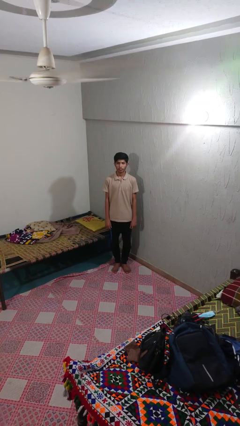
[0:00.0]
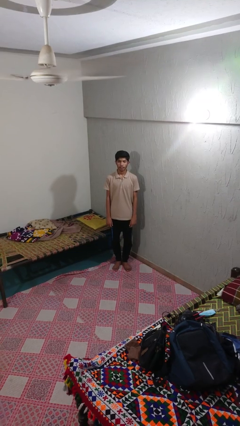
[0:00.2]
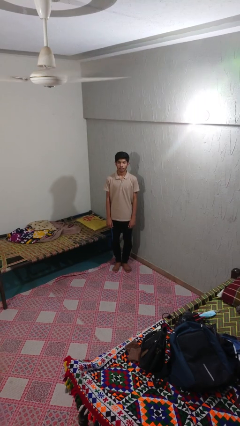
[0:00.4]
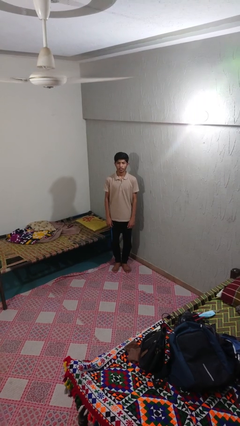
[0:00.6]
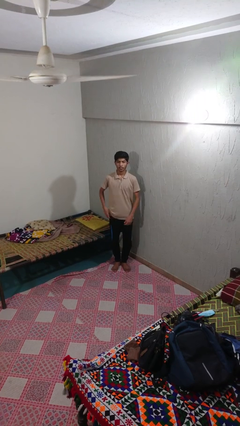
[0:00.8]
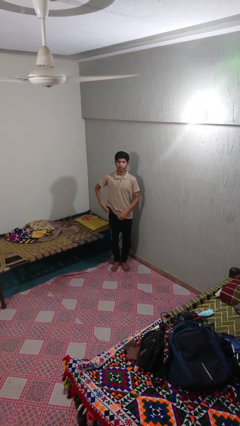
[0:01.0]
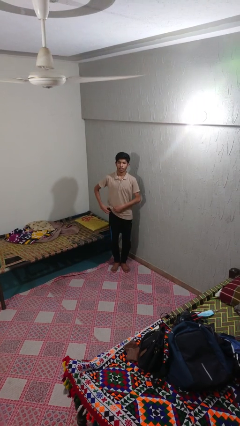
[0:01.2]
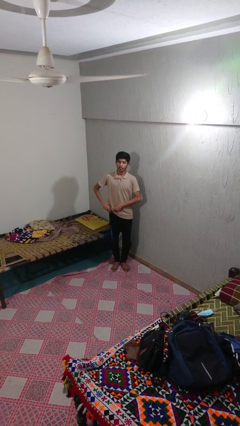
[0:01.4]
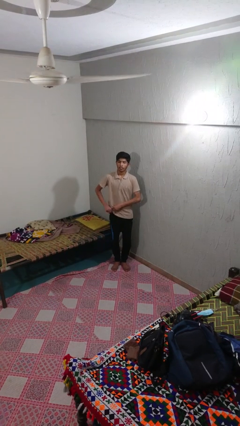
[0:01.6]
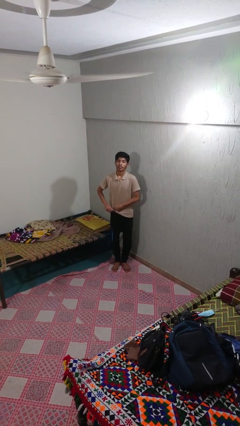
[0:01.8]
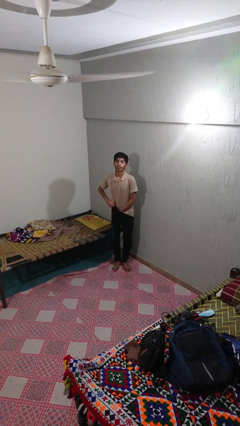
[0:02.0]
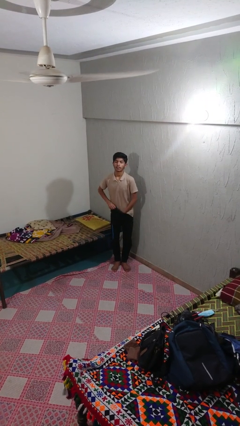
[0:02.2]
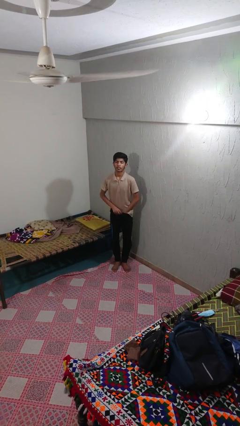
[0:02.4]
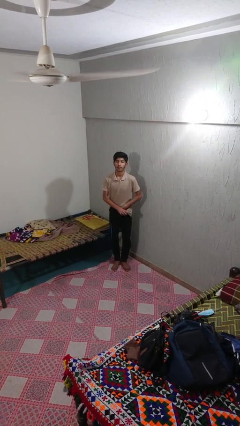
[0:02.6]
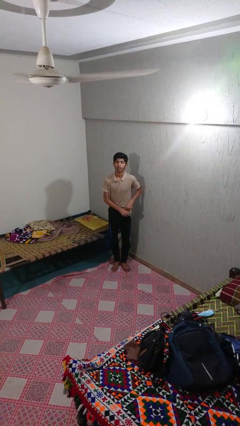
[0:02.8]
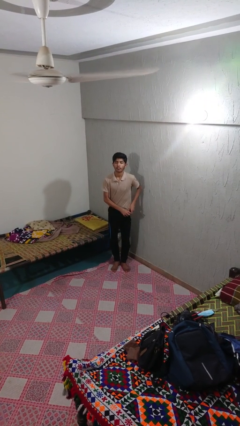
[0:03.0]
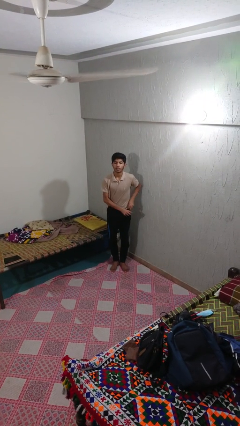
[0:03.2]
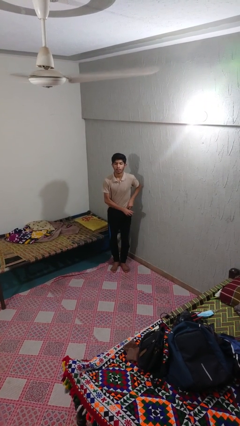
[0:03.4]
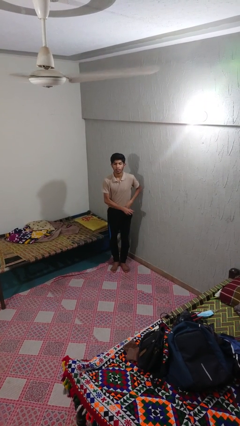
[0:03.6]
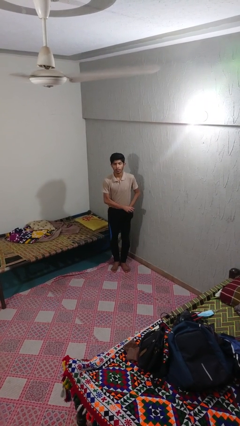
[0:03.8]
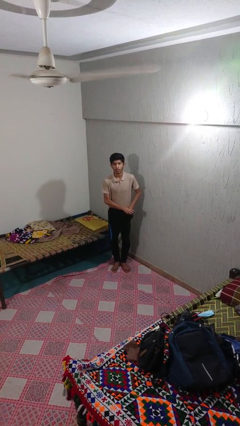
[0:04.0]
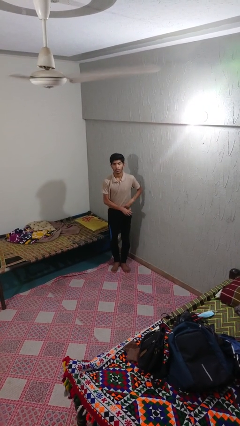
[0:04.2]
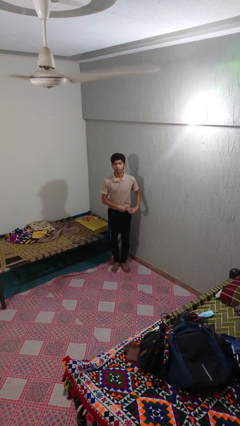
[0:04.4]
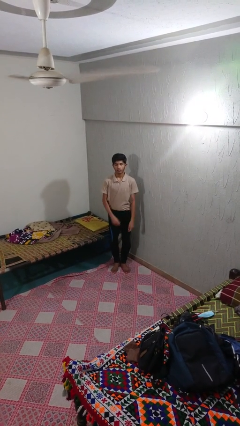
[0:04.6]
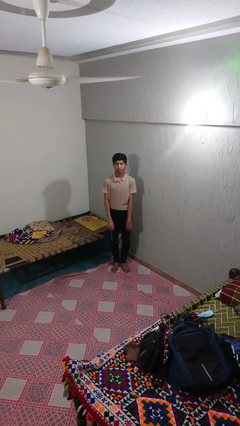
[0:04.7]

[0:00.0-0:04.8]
person tucks in shirt

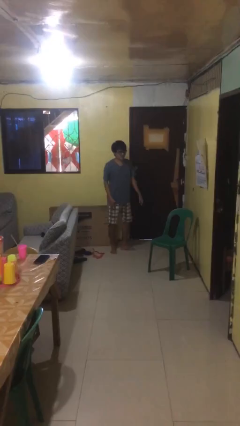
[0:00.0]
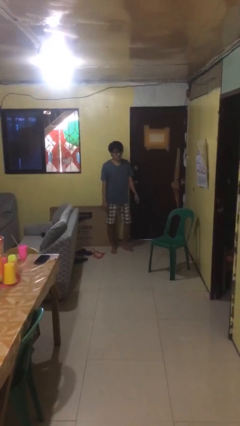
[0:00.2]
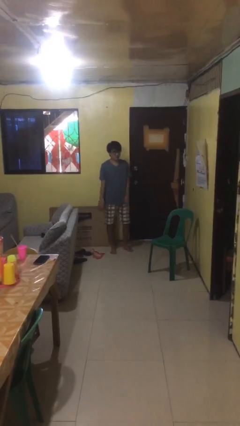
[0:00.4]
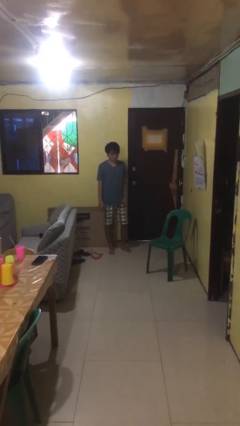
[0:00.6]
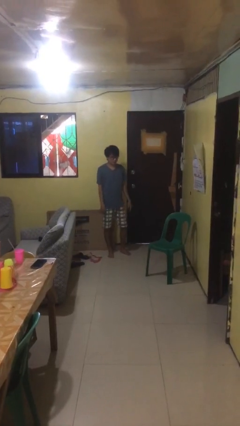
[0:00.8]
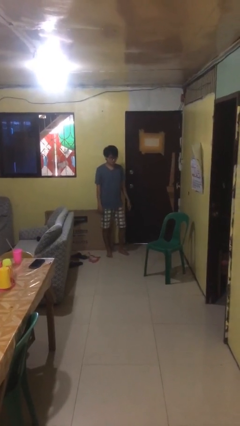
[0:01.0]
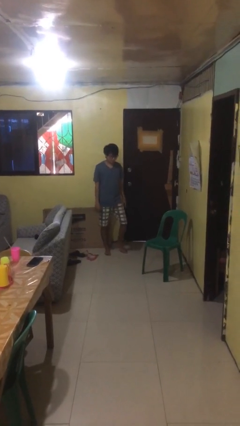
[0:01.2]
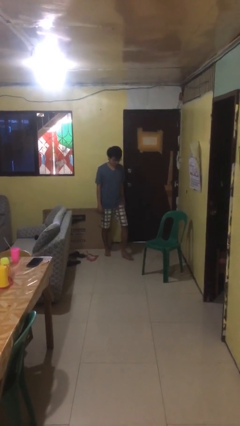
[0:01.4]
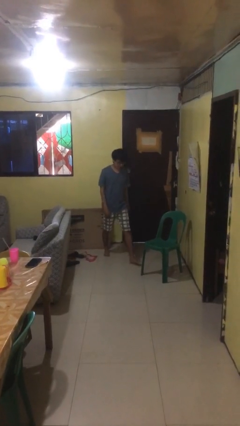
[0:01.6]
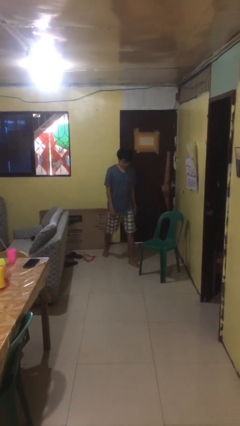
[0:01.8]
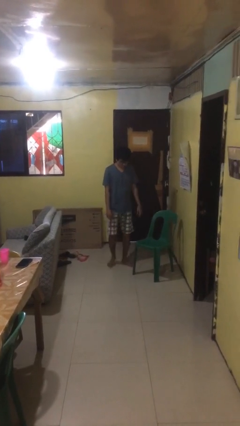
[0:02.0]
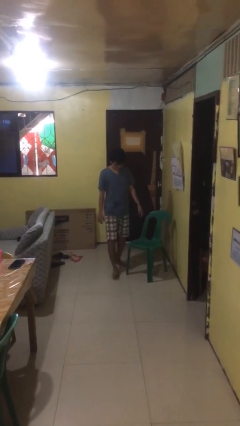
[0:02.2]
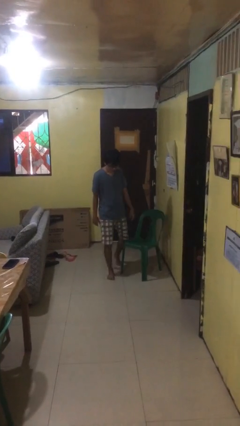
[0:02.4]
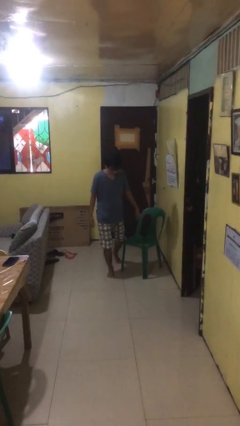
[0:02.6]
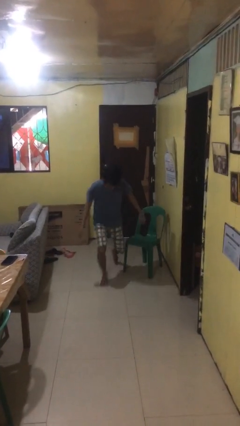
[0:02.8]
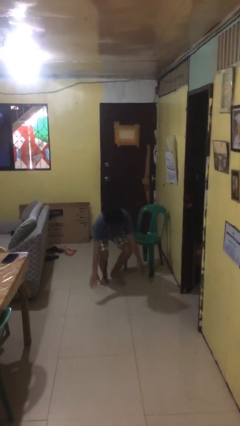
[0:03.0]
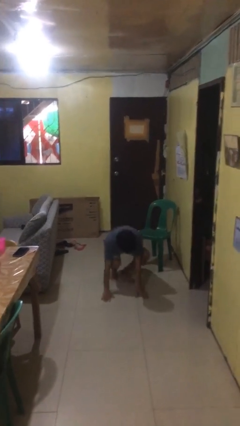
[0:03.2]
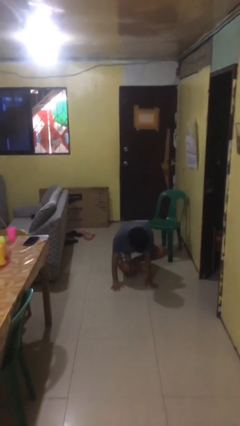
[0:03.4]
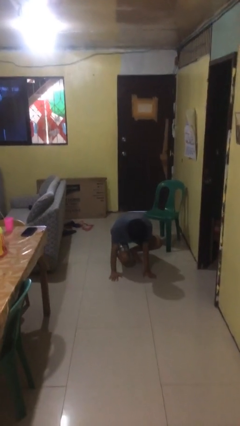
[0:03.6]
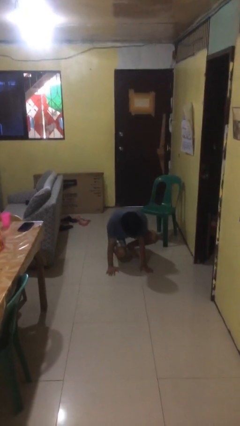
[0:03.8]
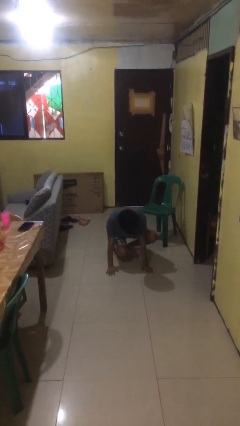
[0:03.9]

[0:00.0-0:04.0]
person trips on object on floor

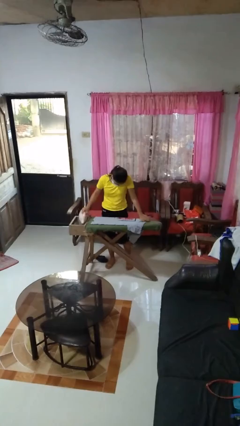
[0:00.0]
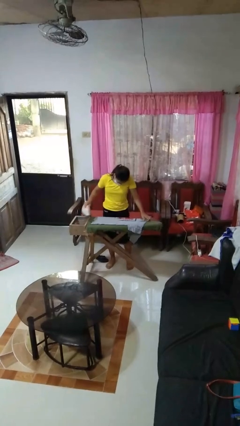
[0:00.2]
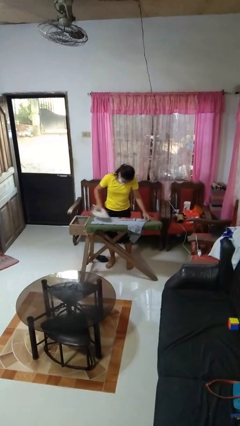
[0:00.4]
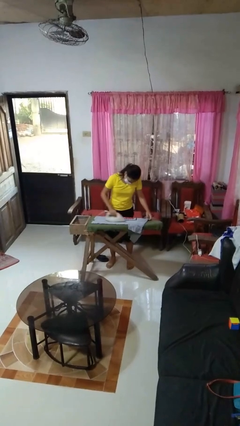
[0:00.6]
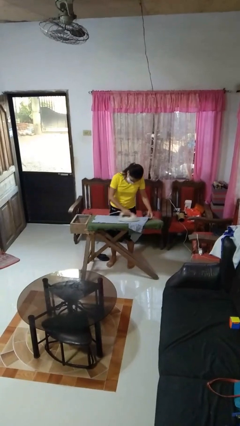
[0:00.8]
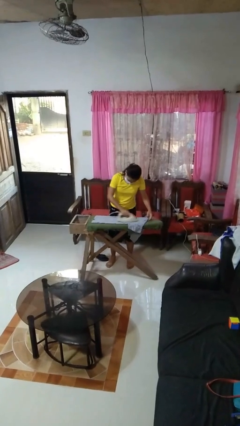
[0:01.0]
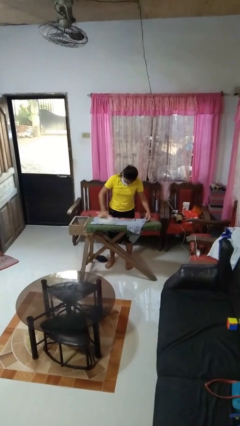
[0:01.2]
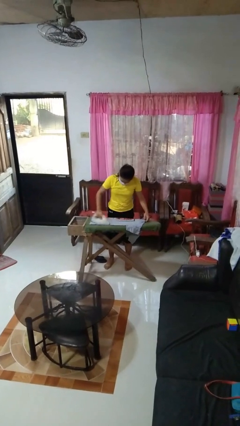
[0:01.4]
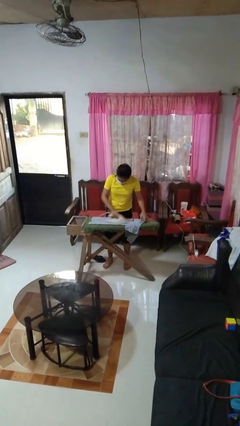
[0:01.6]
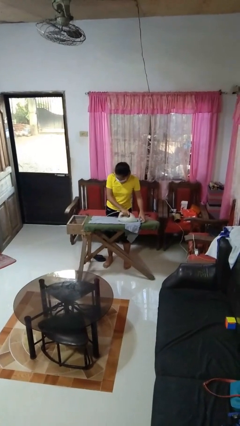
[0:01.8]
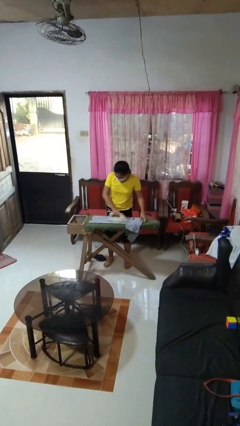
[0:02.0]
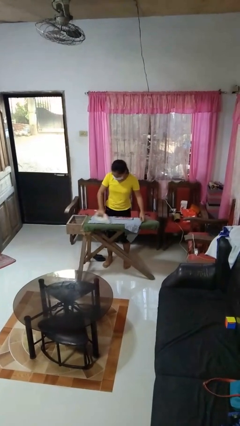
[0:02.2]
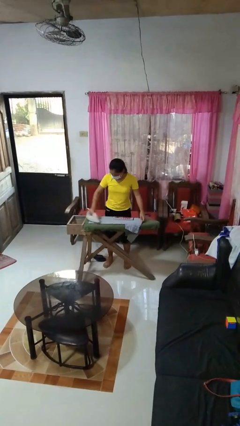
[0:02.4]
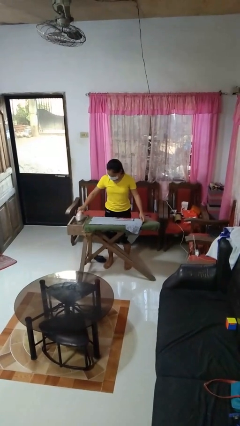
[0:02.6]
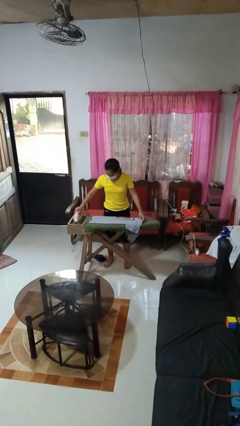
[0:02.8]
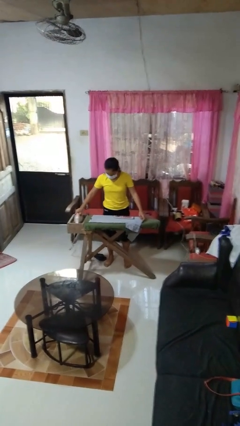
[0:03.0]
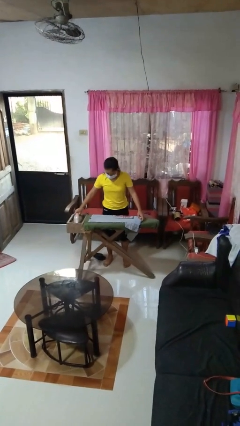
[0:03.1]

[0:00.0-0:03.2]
person irons clothes

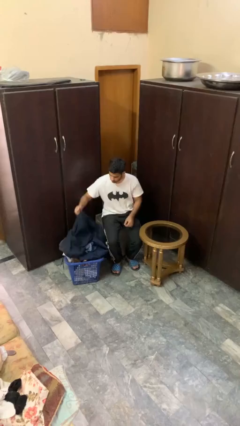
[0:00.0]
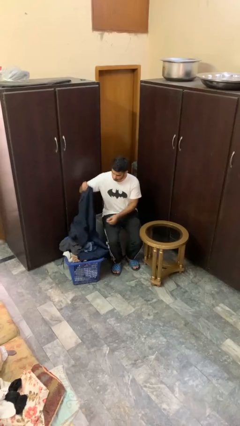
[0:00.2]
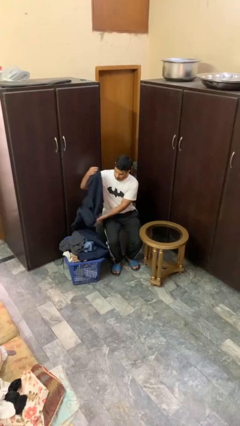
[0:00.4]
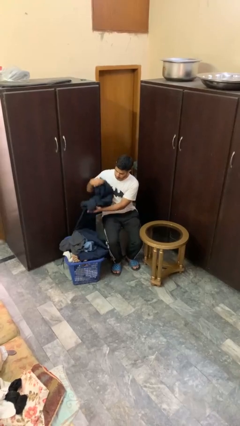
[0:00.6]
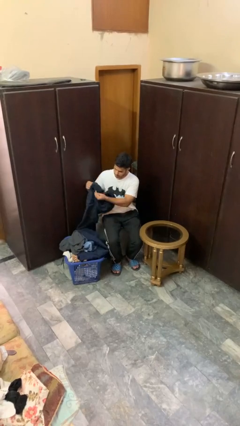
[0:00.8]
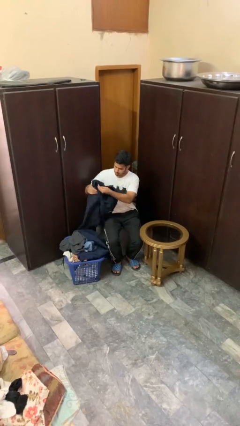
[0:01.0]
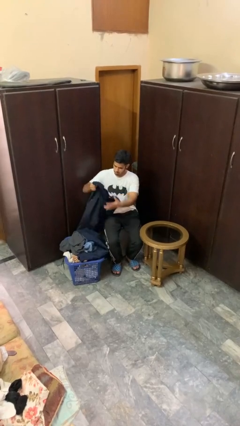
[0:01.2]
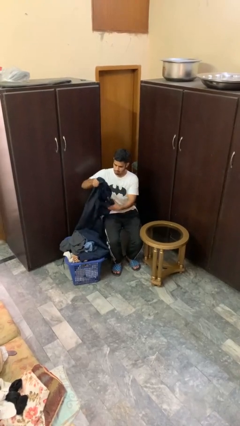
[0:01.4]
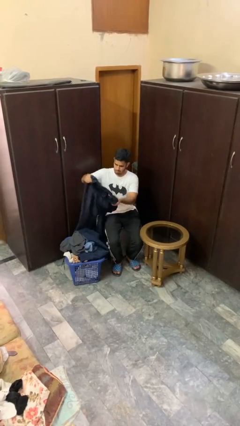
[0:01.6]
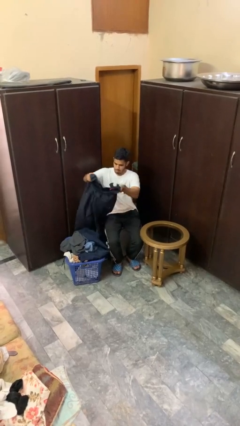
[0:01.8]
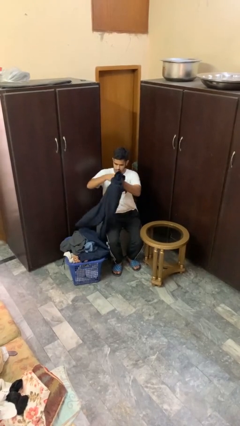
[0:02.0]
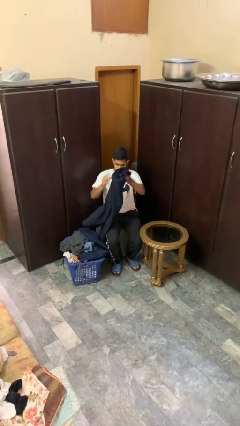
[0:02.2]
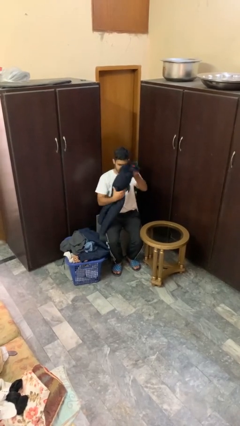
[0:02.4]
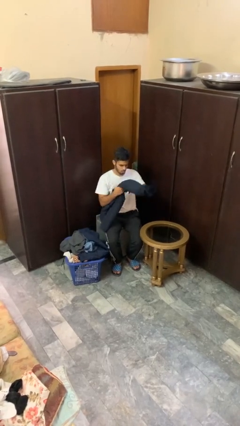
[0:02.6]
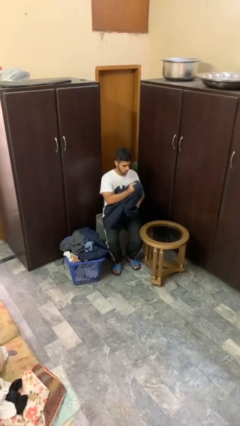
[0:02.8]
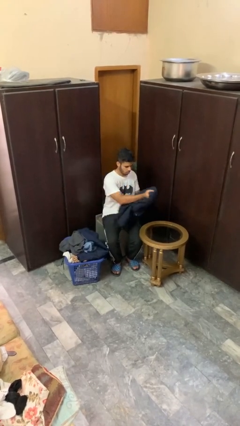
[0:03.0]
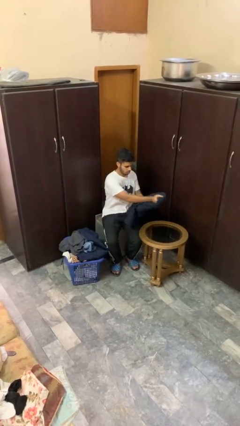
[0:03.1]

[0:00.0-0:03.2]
person folds pants

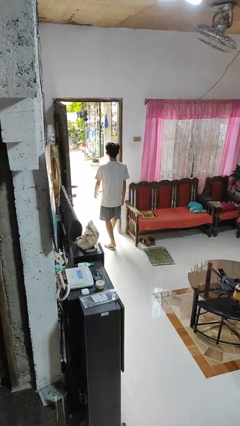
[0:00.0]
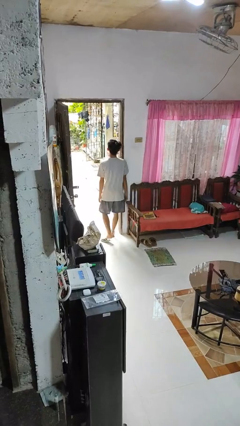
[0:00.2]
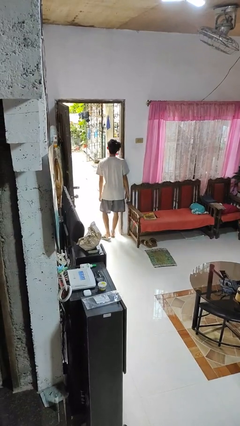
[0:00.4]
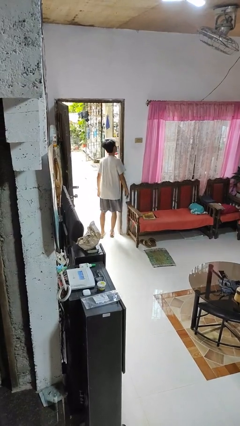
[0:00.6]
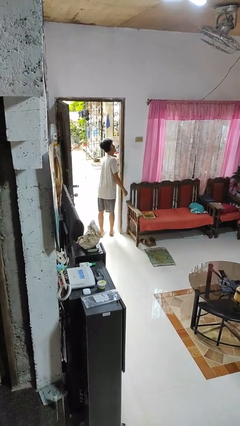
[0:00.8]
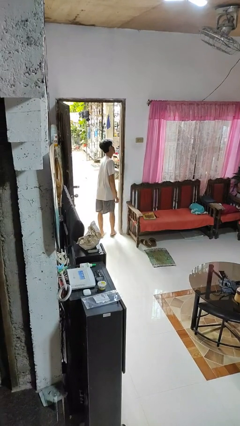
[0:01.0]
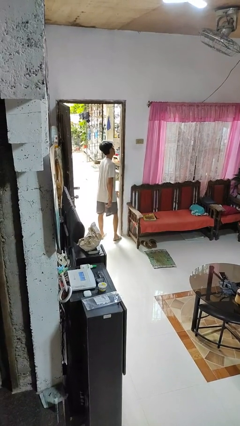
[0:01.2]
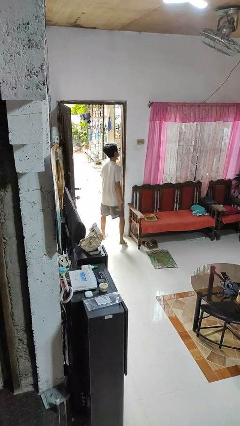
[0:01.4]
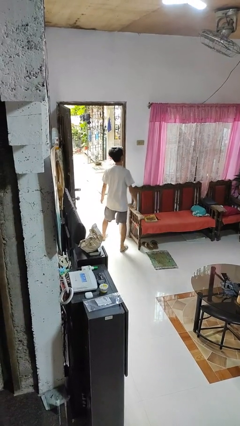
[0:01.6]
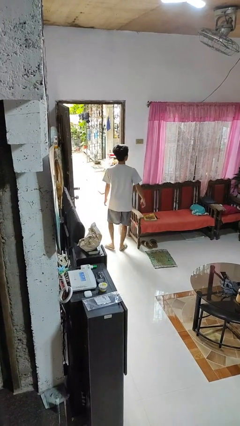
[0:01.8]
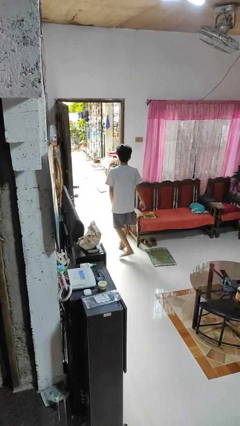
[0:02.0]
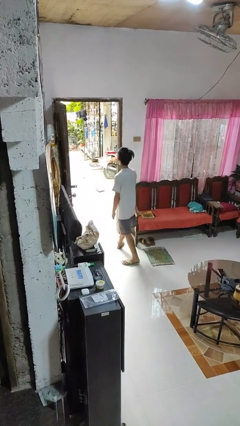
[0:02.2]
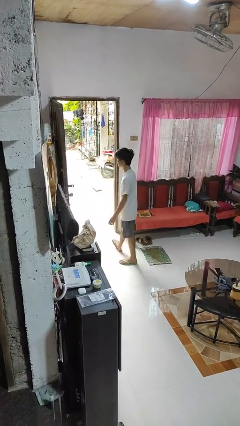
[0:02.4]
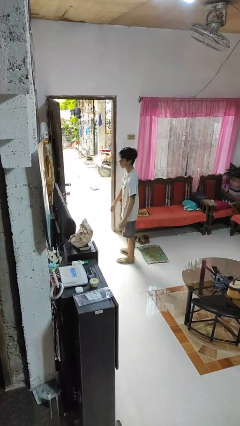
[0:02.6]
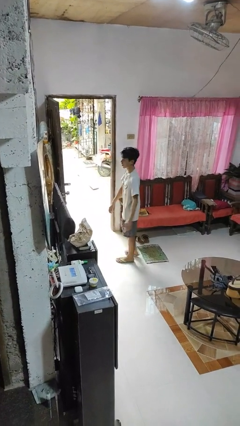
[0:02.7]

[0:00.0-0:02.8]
person bumps into wall
